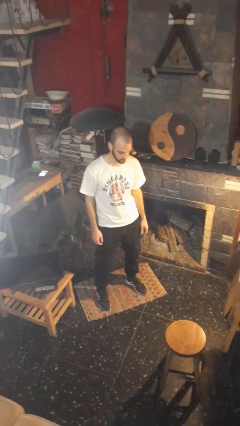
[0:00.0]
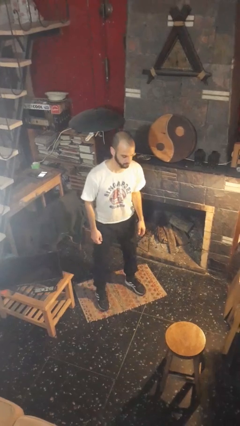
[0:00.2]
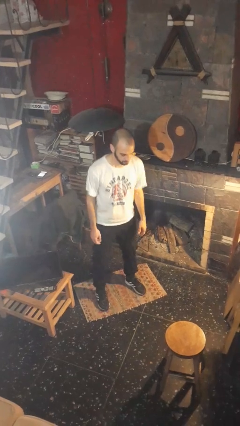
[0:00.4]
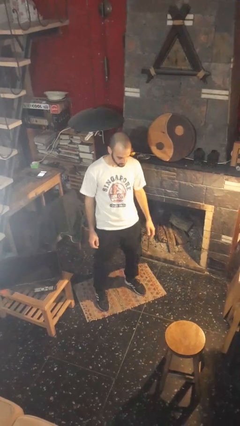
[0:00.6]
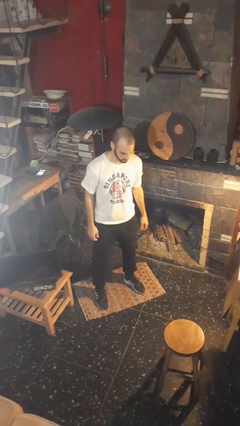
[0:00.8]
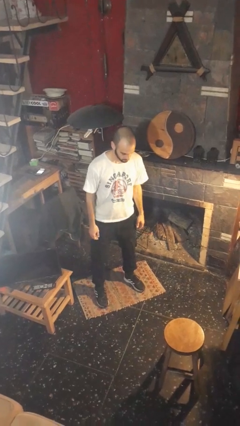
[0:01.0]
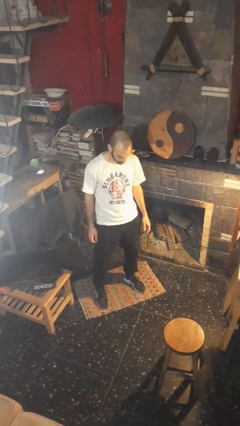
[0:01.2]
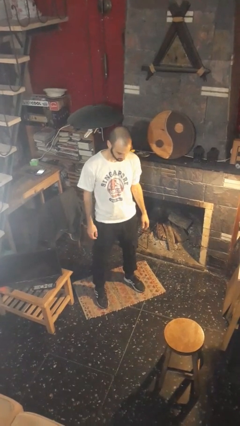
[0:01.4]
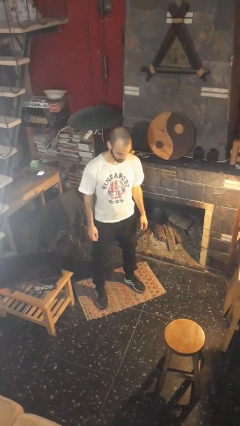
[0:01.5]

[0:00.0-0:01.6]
person wiggles hips

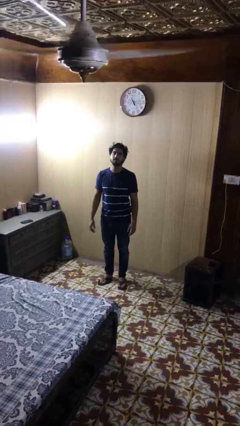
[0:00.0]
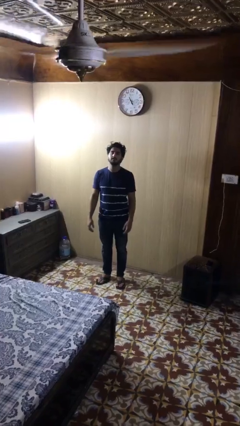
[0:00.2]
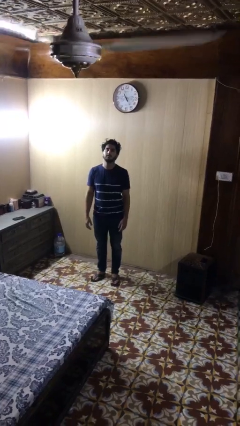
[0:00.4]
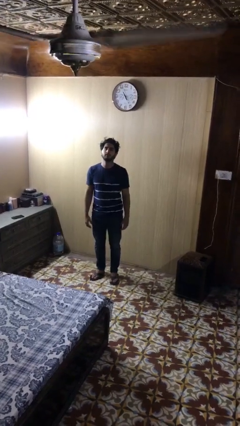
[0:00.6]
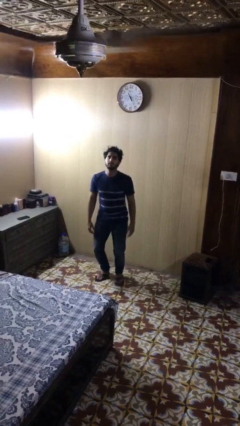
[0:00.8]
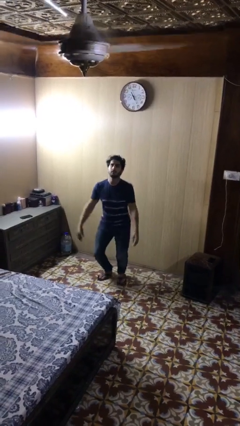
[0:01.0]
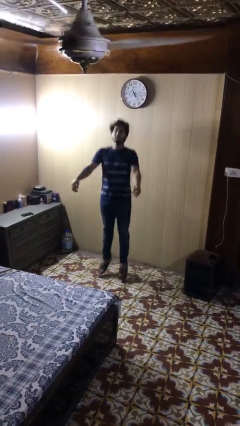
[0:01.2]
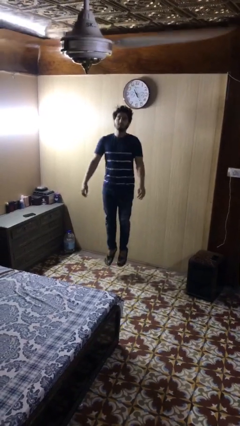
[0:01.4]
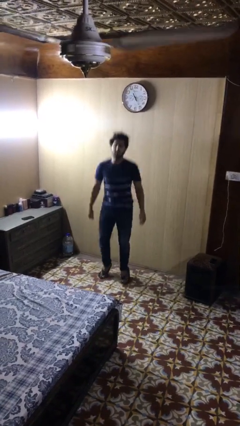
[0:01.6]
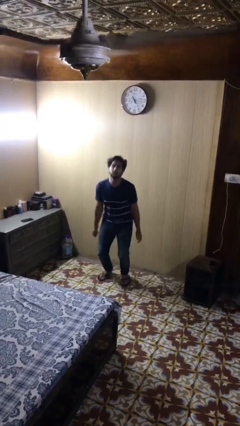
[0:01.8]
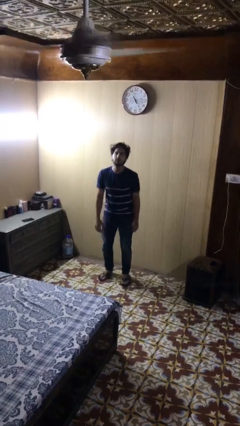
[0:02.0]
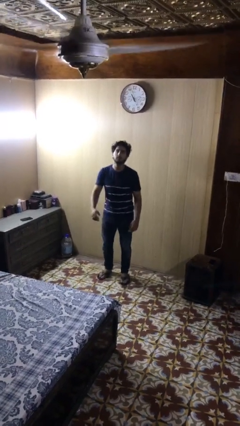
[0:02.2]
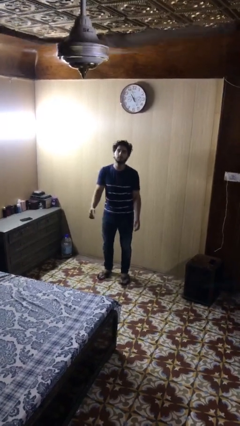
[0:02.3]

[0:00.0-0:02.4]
person jumps

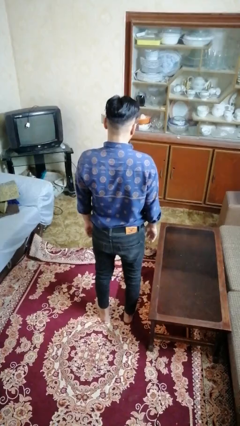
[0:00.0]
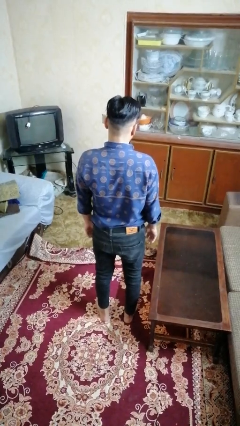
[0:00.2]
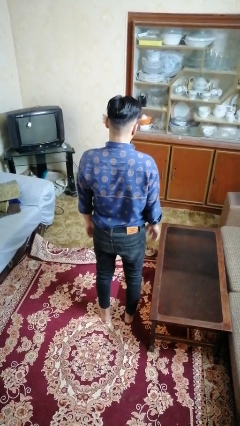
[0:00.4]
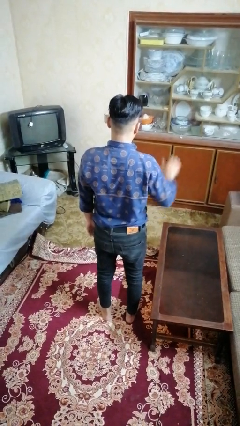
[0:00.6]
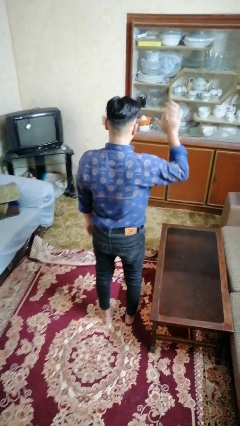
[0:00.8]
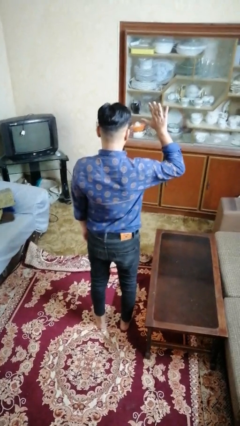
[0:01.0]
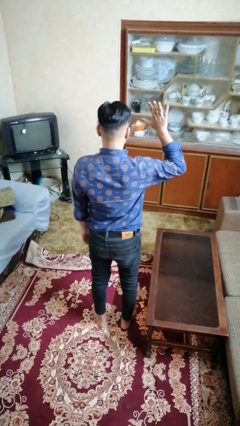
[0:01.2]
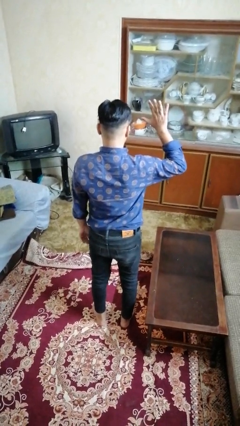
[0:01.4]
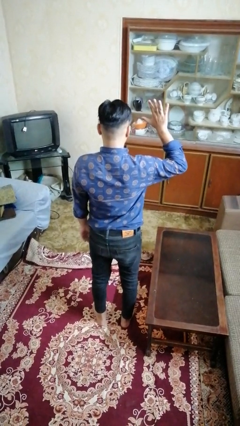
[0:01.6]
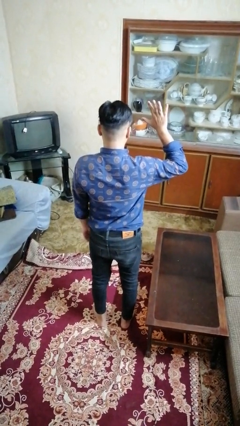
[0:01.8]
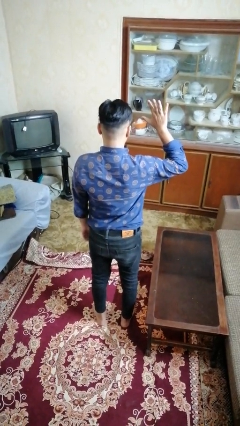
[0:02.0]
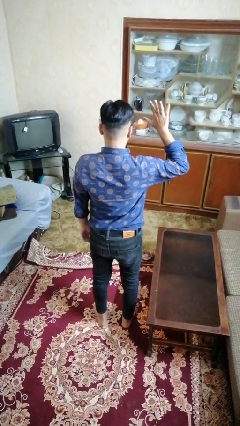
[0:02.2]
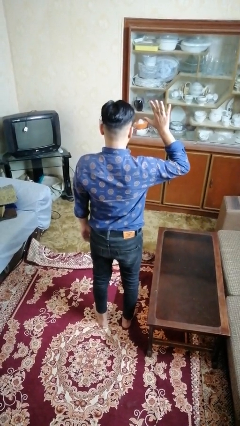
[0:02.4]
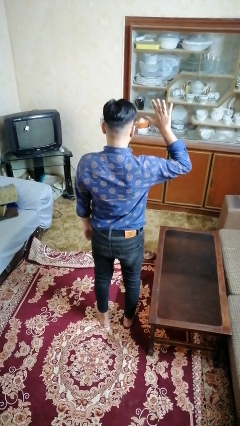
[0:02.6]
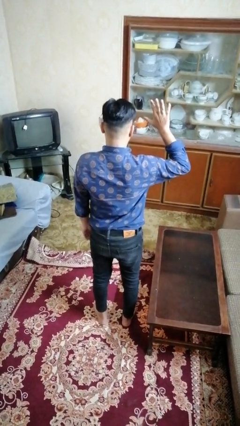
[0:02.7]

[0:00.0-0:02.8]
person gestures number five

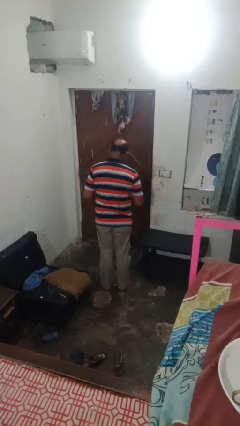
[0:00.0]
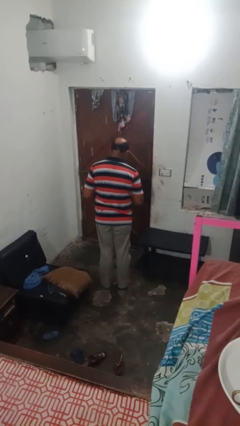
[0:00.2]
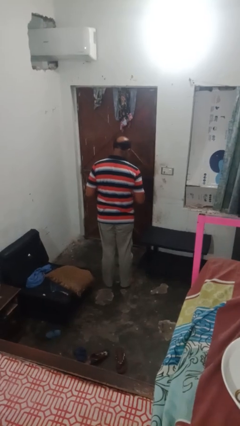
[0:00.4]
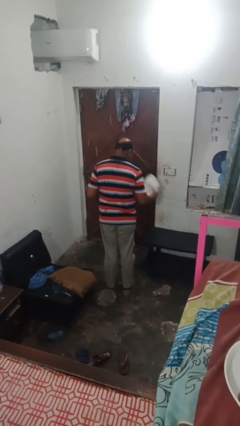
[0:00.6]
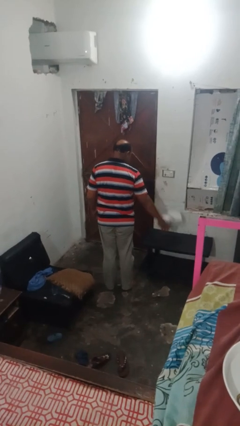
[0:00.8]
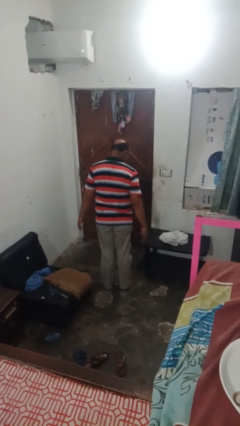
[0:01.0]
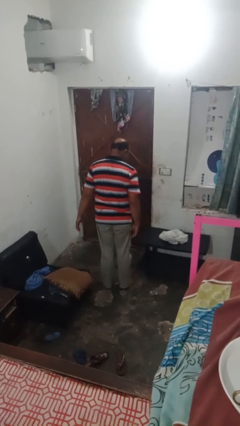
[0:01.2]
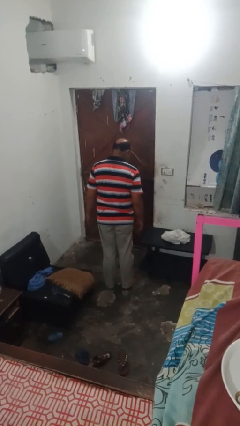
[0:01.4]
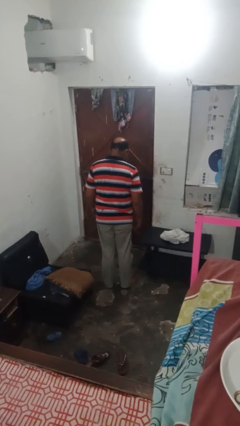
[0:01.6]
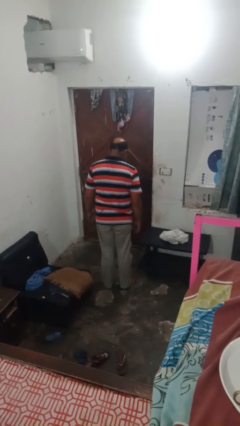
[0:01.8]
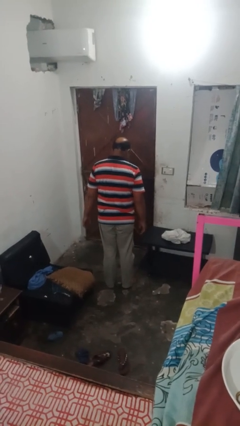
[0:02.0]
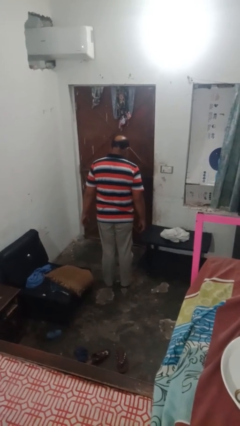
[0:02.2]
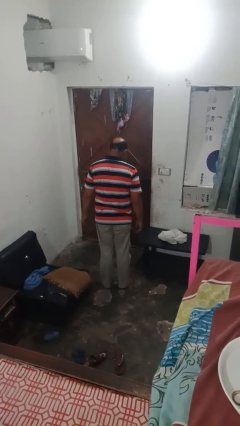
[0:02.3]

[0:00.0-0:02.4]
person throws object on table

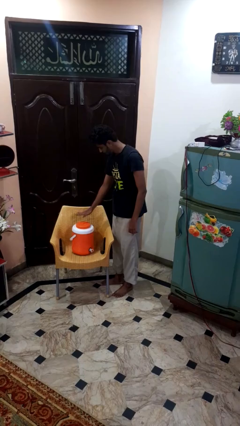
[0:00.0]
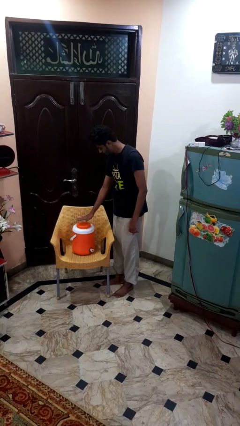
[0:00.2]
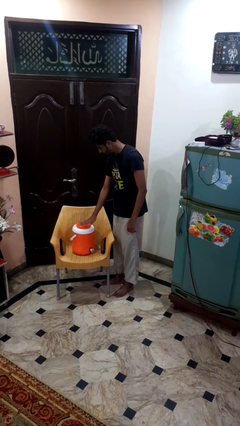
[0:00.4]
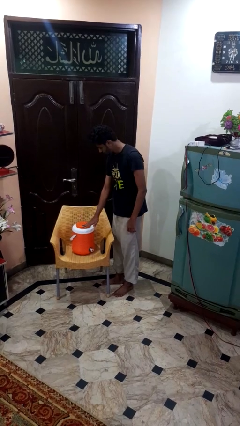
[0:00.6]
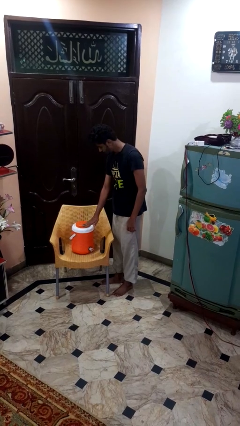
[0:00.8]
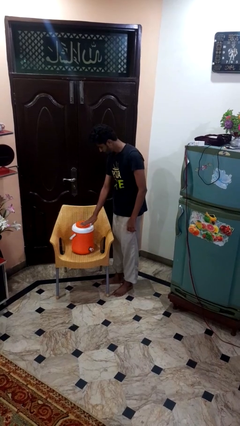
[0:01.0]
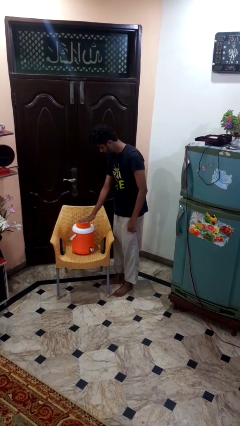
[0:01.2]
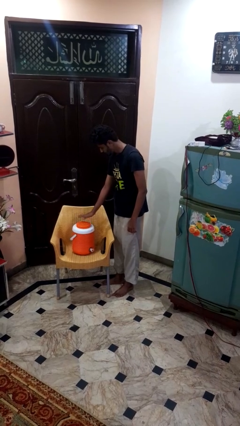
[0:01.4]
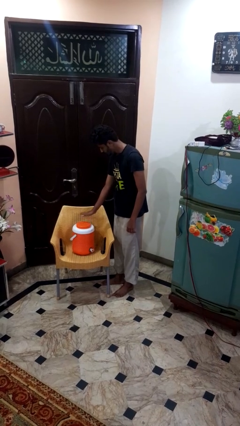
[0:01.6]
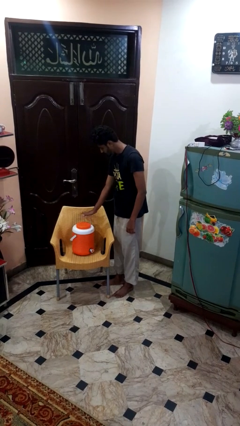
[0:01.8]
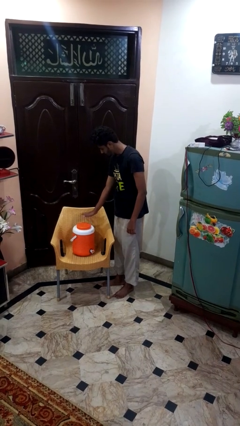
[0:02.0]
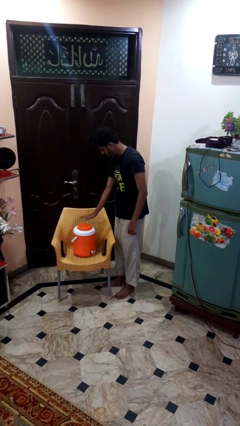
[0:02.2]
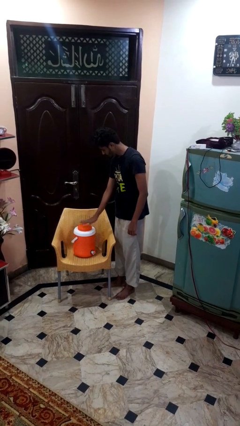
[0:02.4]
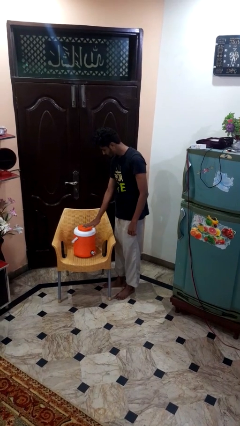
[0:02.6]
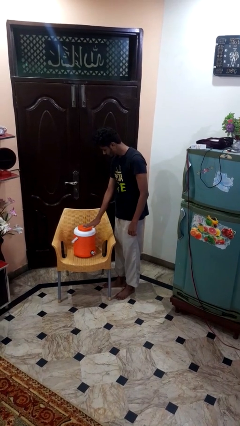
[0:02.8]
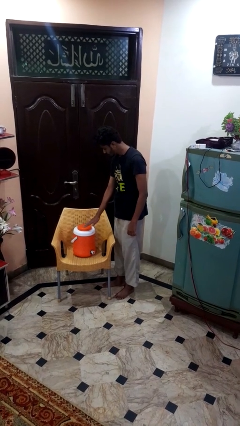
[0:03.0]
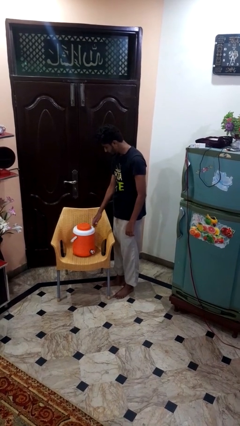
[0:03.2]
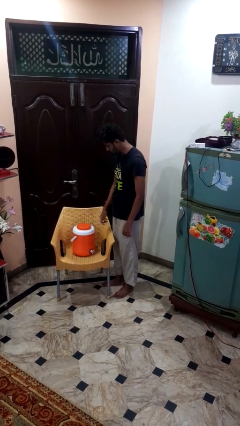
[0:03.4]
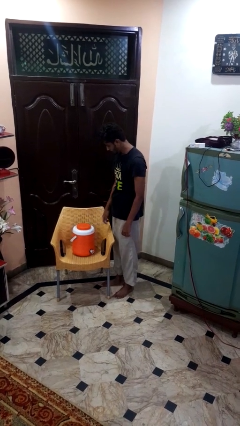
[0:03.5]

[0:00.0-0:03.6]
person waves hand over object

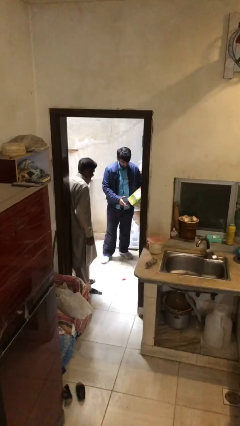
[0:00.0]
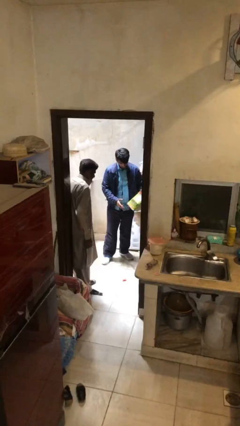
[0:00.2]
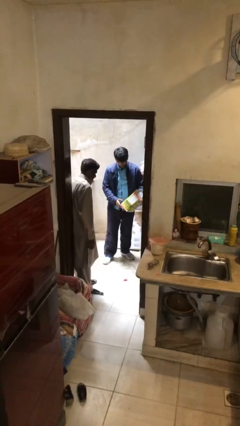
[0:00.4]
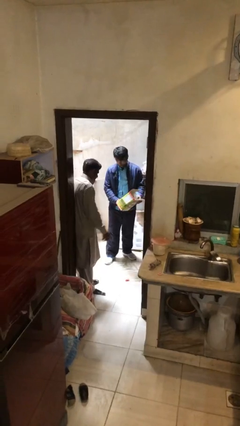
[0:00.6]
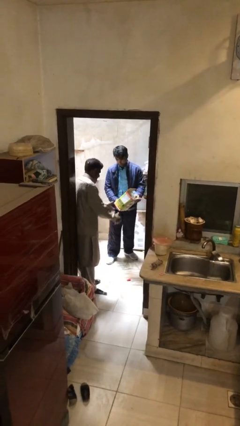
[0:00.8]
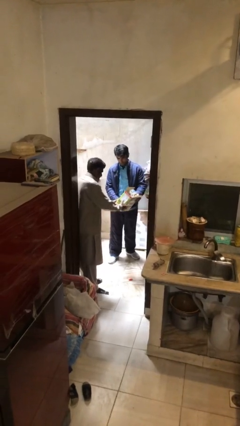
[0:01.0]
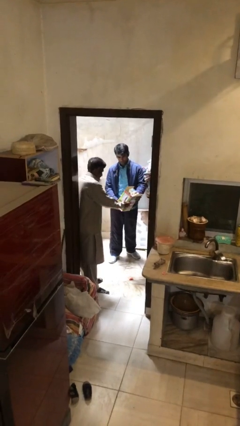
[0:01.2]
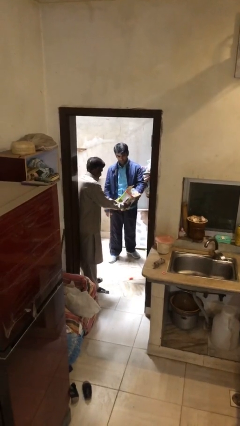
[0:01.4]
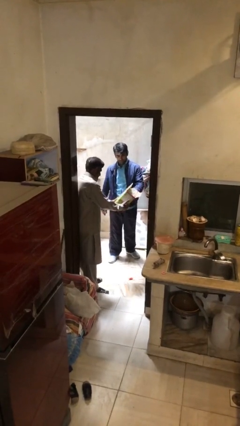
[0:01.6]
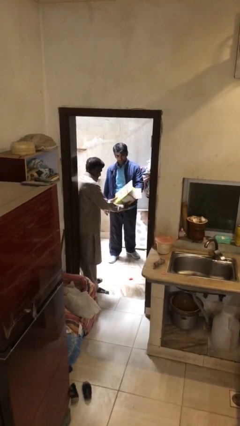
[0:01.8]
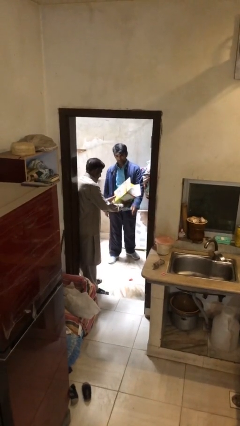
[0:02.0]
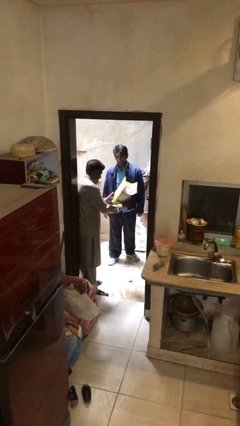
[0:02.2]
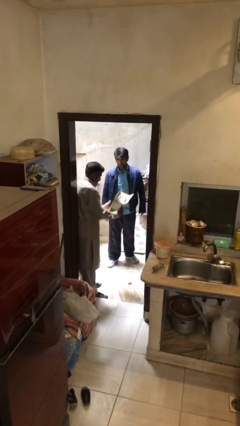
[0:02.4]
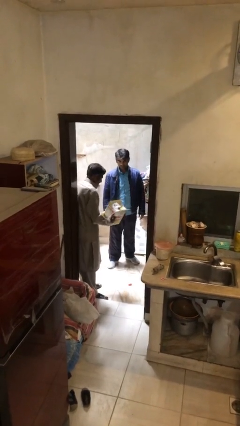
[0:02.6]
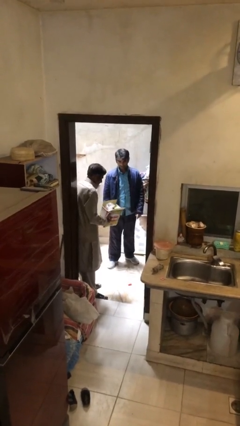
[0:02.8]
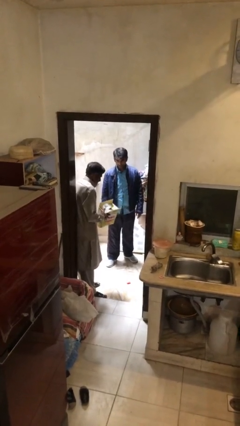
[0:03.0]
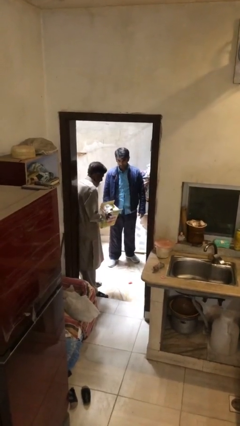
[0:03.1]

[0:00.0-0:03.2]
person transfers object to person

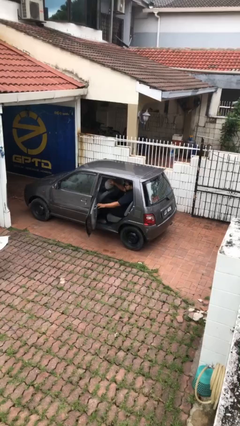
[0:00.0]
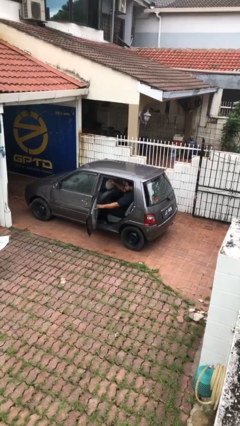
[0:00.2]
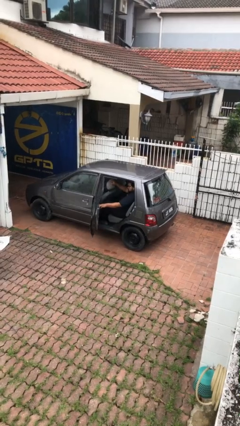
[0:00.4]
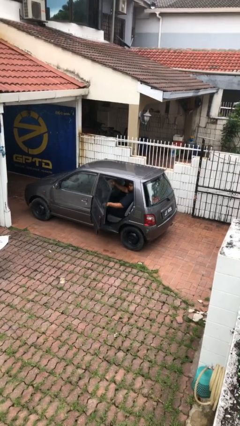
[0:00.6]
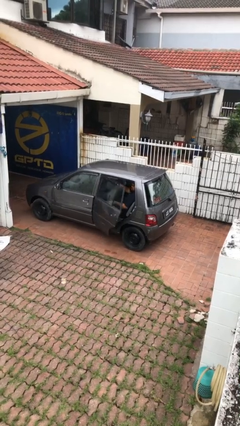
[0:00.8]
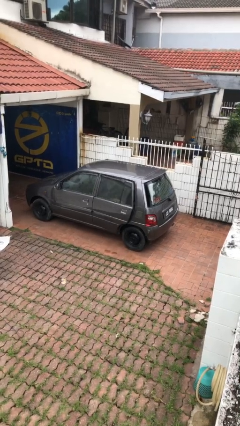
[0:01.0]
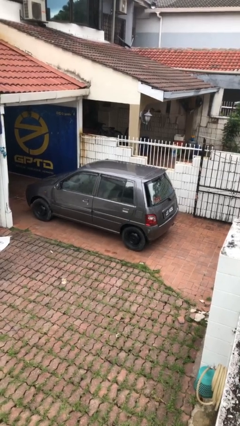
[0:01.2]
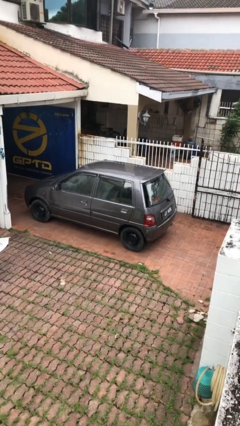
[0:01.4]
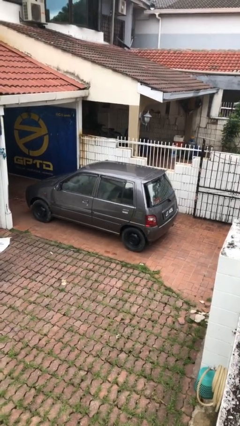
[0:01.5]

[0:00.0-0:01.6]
person closes car door
